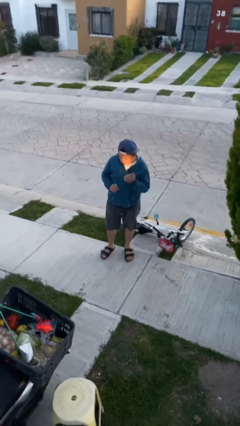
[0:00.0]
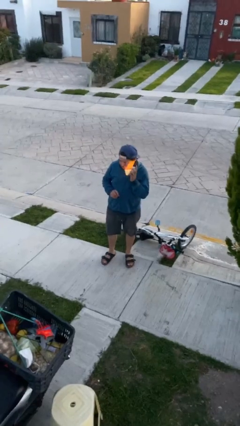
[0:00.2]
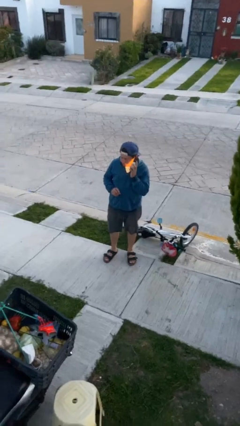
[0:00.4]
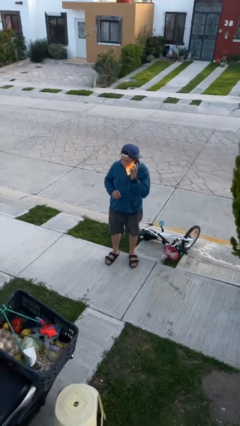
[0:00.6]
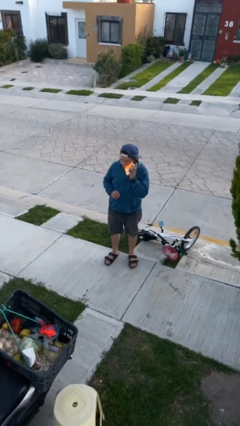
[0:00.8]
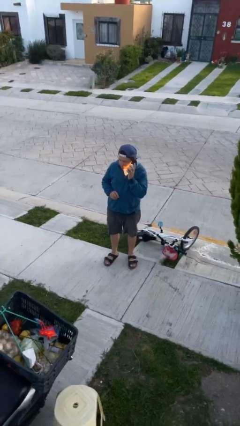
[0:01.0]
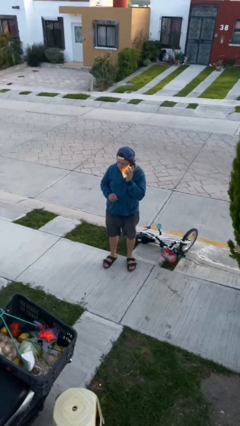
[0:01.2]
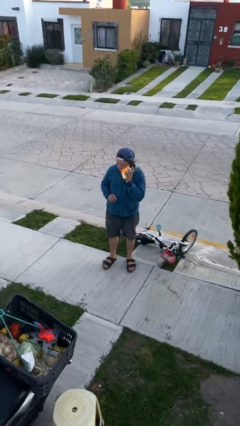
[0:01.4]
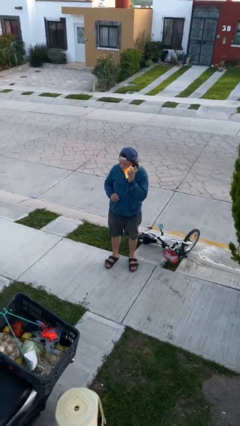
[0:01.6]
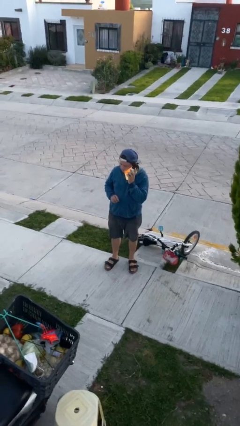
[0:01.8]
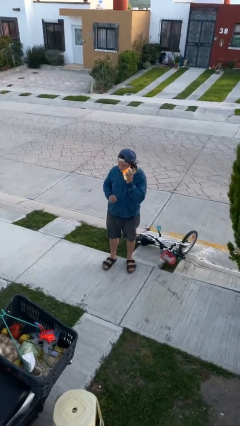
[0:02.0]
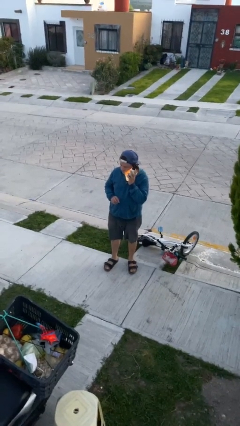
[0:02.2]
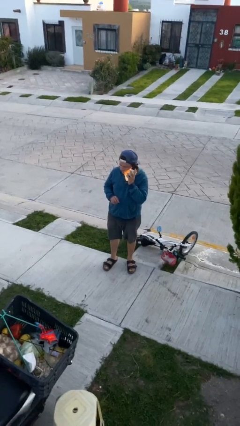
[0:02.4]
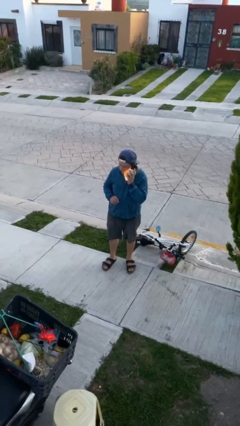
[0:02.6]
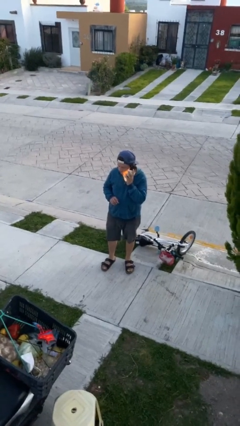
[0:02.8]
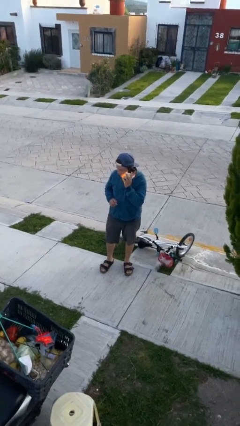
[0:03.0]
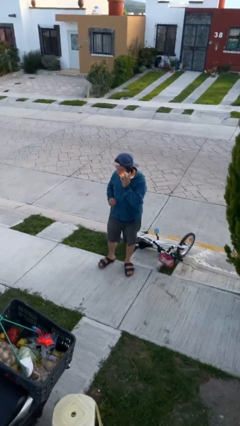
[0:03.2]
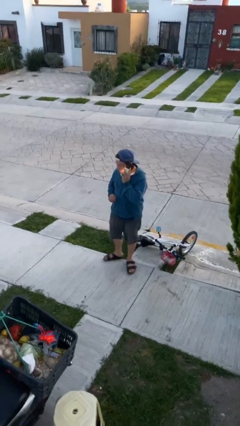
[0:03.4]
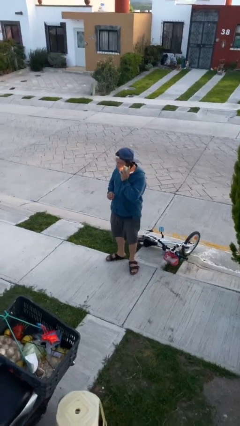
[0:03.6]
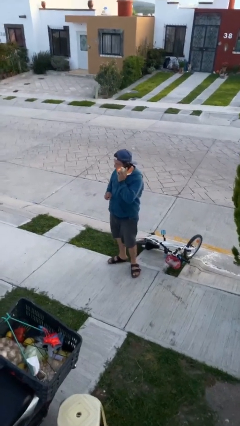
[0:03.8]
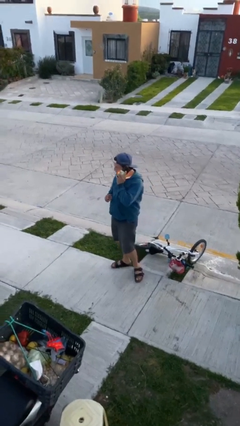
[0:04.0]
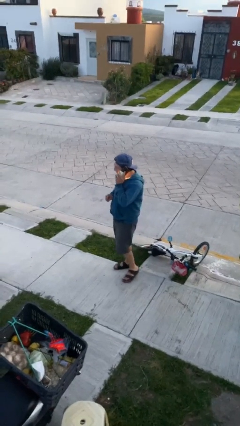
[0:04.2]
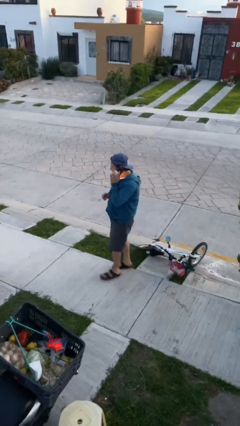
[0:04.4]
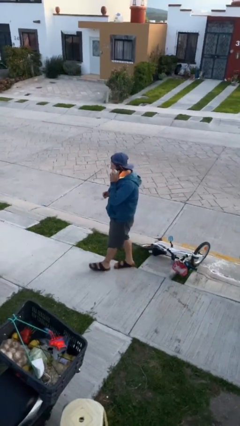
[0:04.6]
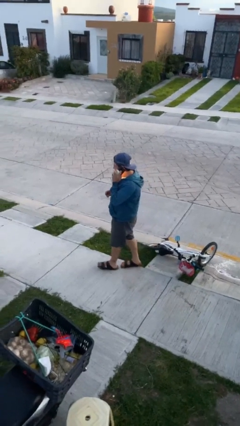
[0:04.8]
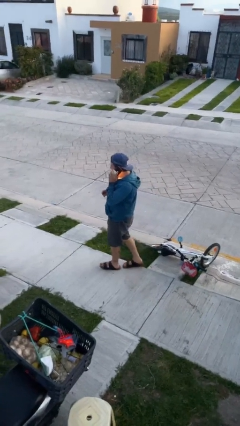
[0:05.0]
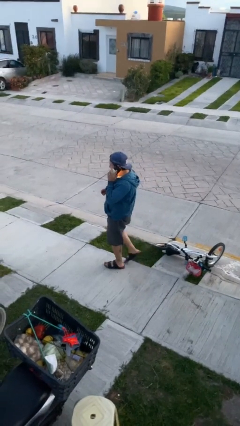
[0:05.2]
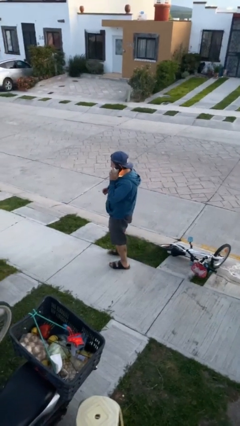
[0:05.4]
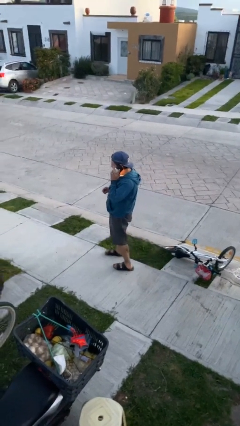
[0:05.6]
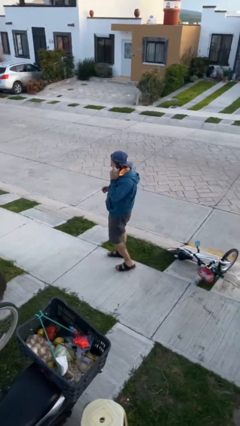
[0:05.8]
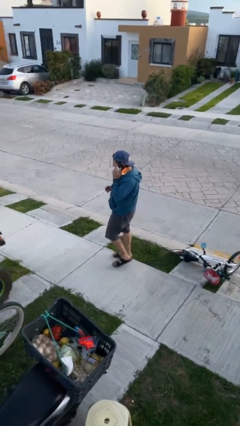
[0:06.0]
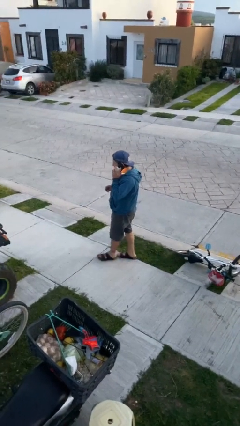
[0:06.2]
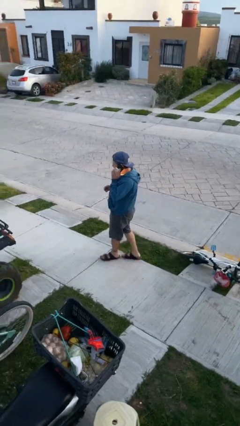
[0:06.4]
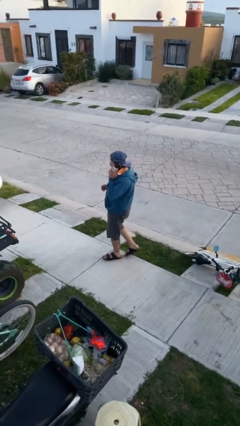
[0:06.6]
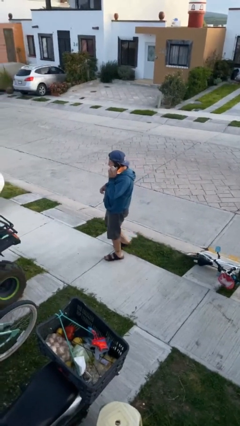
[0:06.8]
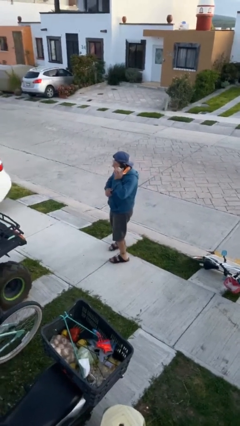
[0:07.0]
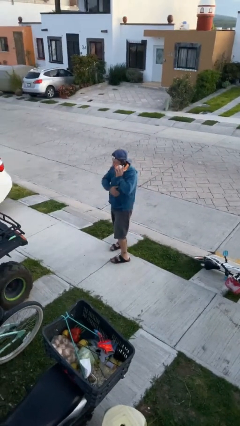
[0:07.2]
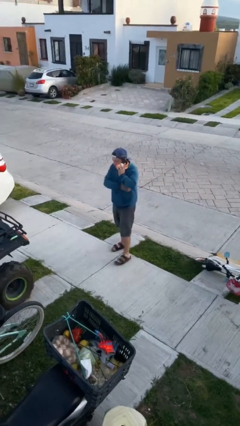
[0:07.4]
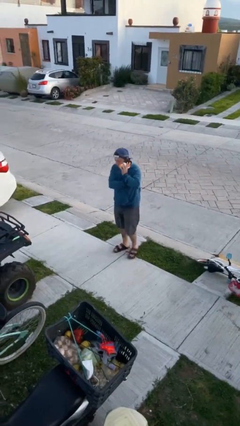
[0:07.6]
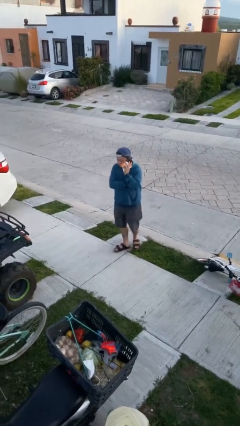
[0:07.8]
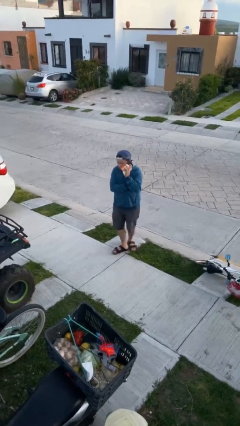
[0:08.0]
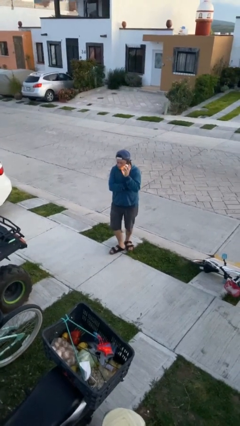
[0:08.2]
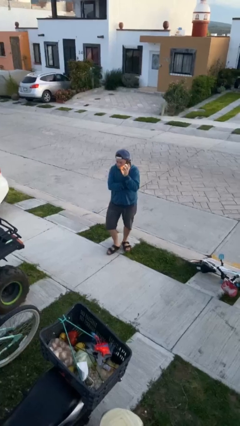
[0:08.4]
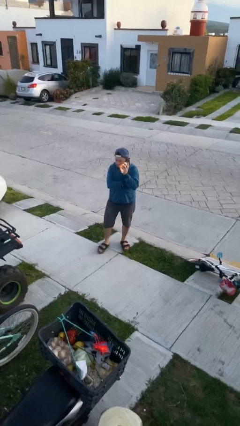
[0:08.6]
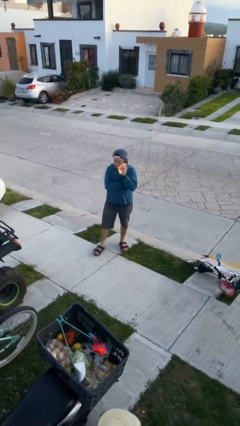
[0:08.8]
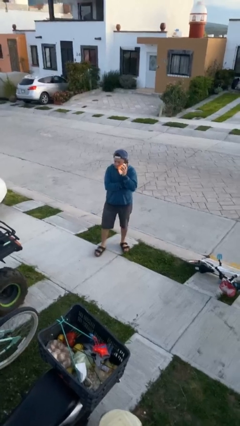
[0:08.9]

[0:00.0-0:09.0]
person talks on phone

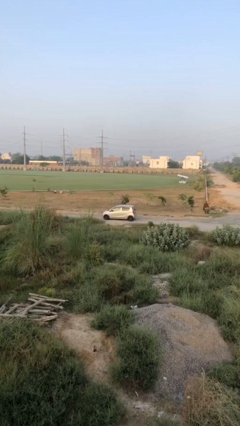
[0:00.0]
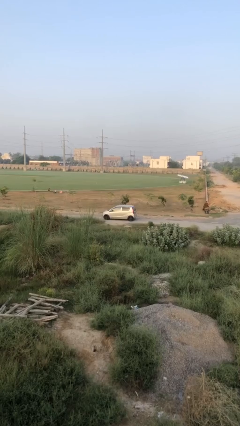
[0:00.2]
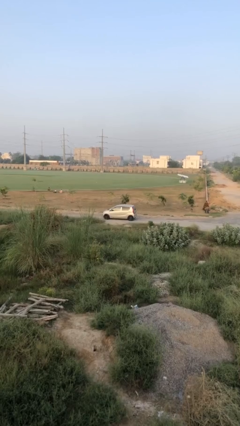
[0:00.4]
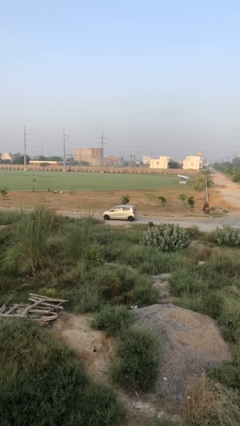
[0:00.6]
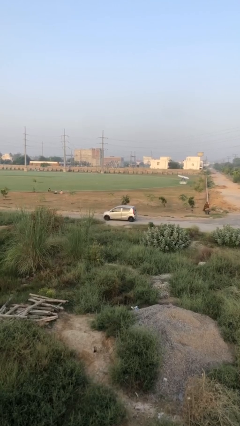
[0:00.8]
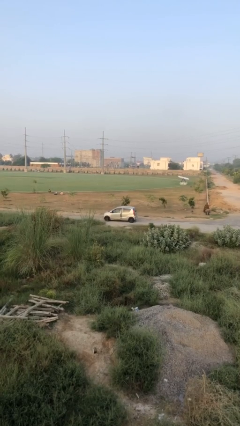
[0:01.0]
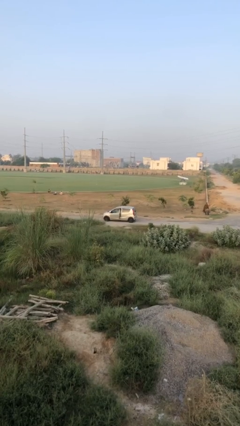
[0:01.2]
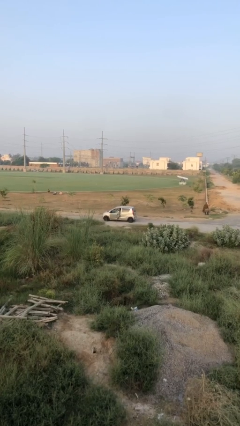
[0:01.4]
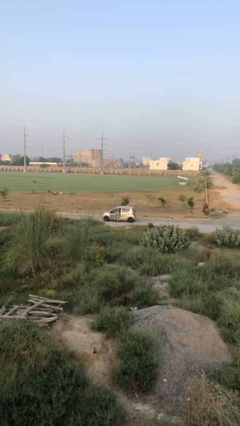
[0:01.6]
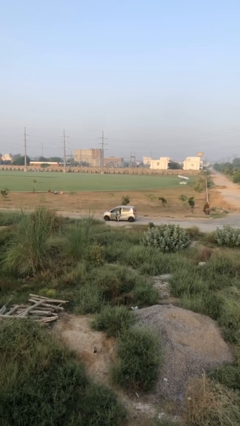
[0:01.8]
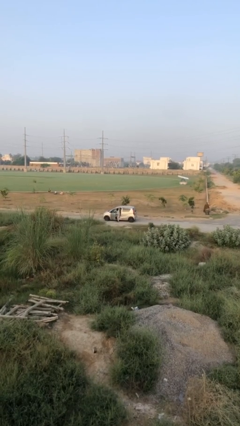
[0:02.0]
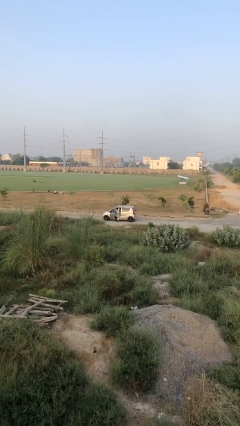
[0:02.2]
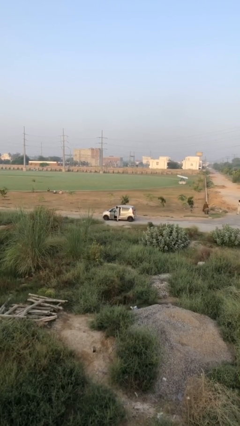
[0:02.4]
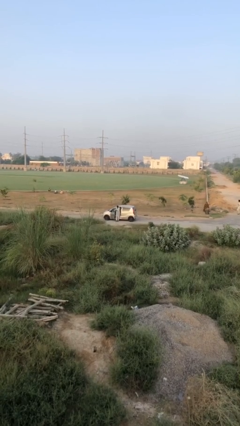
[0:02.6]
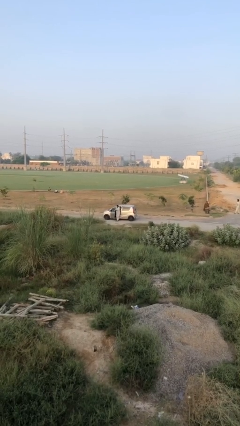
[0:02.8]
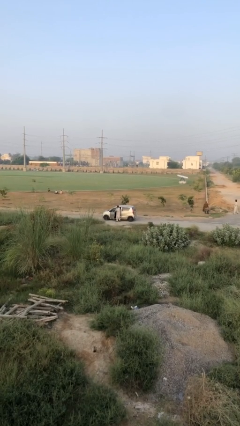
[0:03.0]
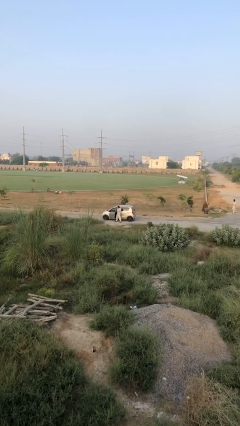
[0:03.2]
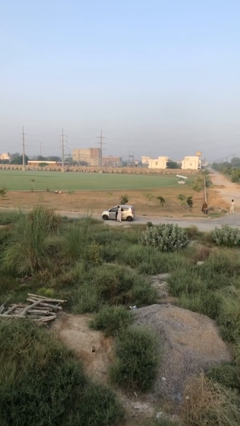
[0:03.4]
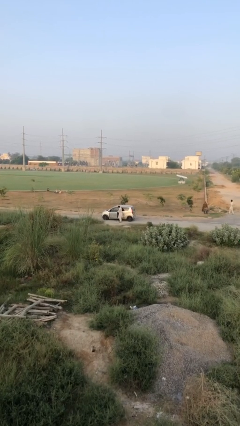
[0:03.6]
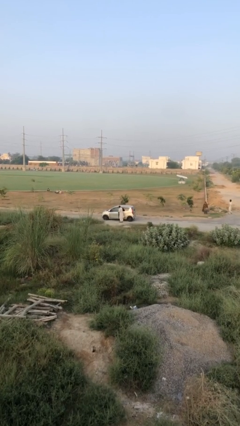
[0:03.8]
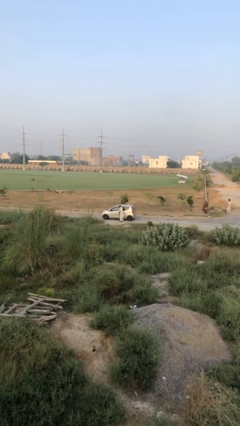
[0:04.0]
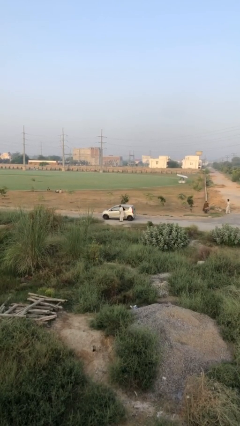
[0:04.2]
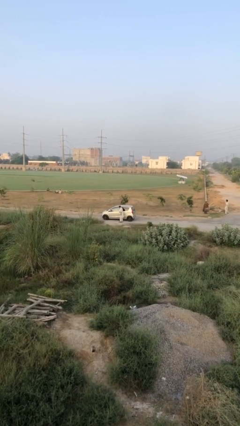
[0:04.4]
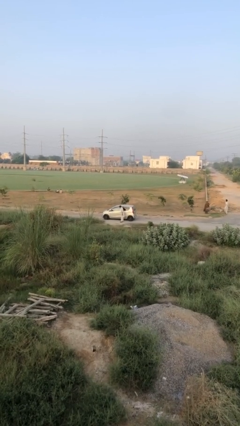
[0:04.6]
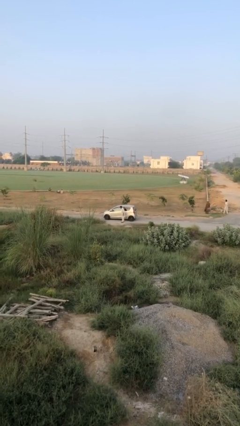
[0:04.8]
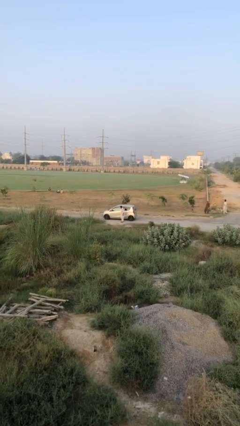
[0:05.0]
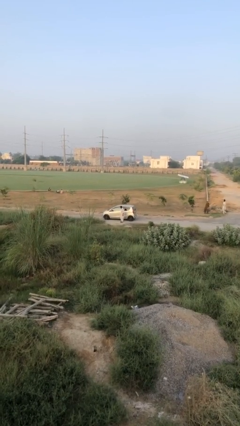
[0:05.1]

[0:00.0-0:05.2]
car drops off person

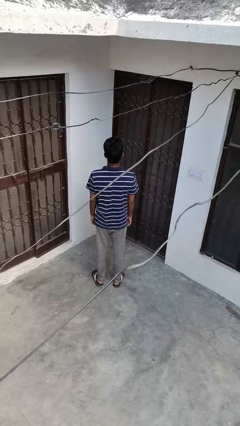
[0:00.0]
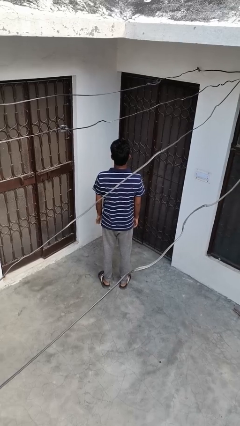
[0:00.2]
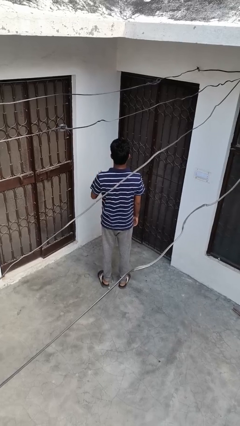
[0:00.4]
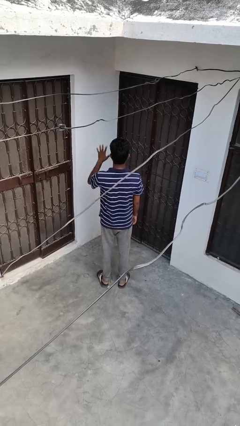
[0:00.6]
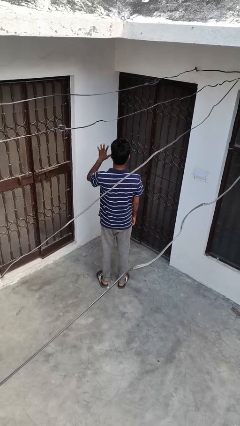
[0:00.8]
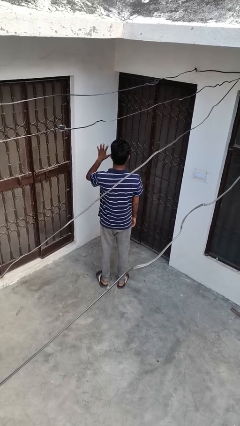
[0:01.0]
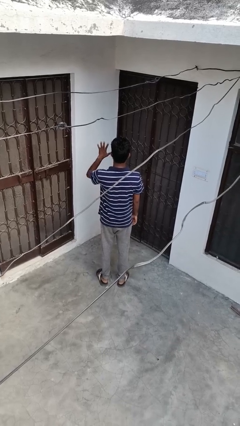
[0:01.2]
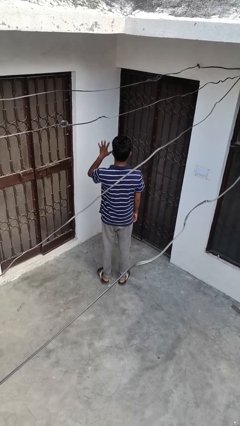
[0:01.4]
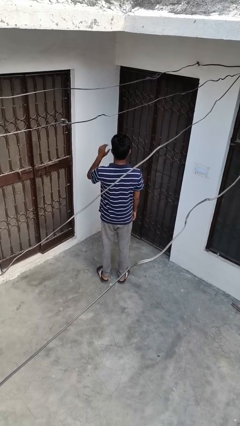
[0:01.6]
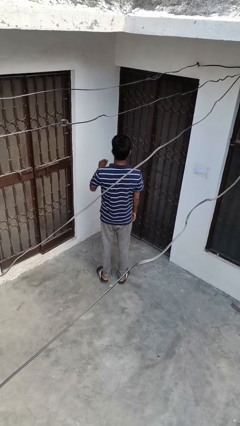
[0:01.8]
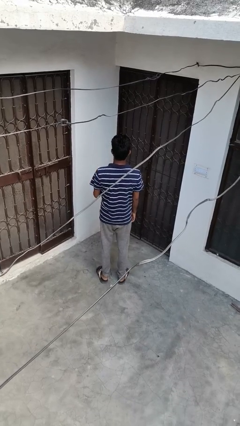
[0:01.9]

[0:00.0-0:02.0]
person gestures number five

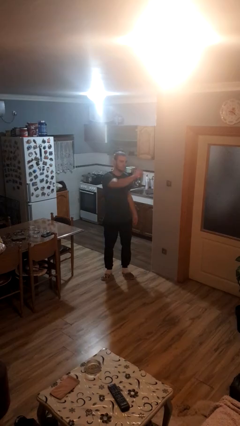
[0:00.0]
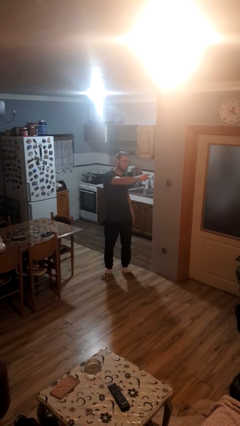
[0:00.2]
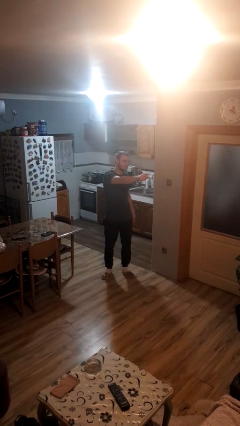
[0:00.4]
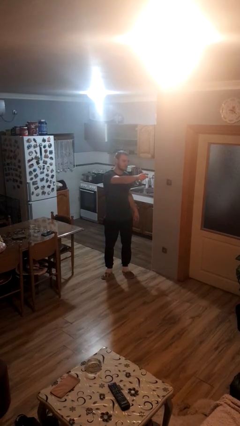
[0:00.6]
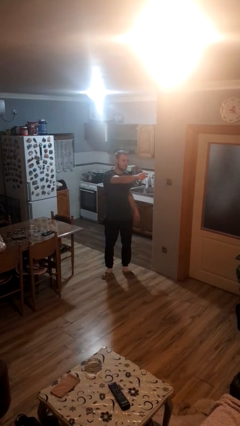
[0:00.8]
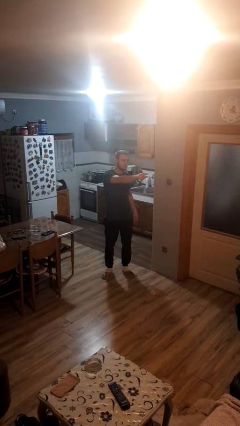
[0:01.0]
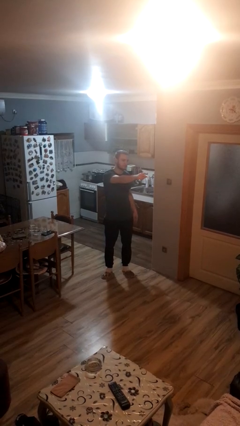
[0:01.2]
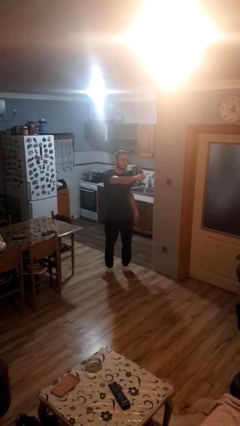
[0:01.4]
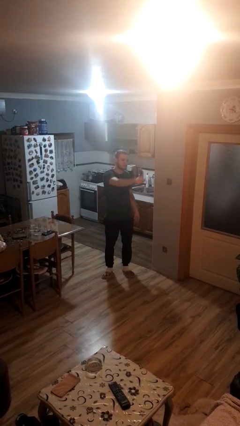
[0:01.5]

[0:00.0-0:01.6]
person points at person

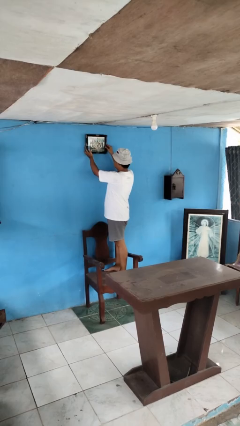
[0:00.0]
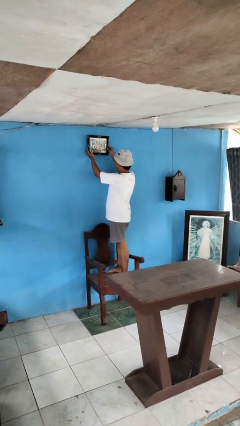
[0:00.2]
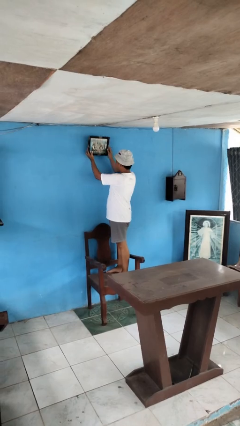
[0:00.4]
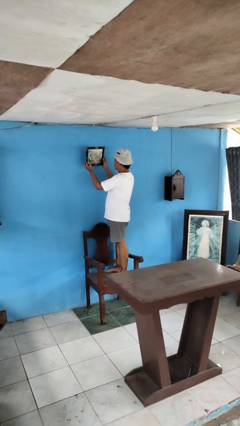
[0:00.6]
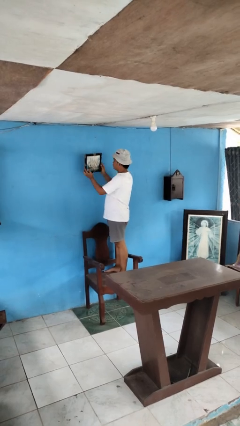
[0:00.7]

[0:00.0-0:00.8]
person takes down picture frame
